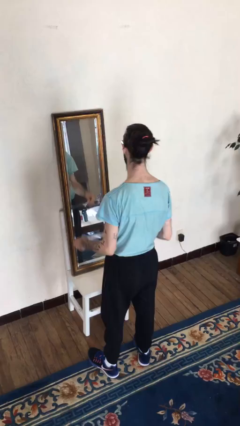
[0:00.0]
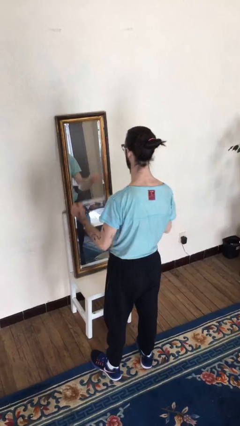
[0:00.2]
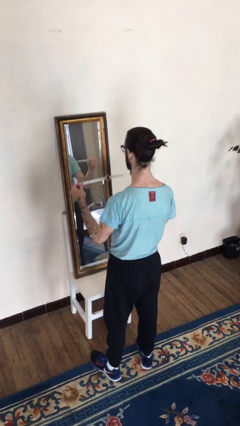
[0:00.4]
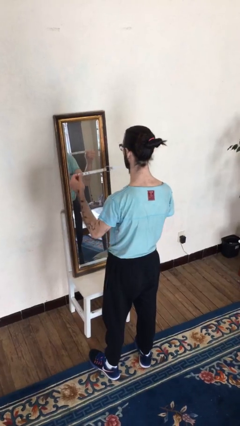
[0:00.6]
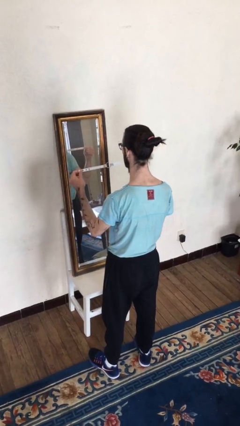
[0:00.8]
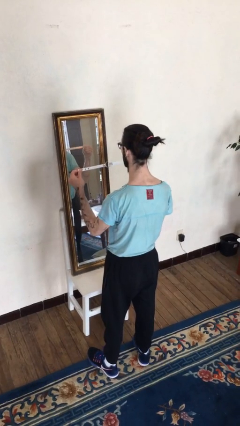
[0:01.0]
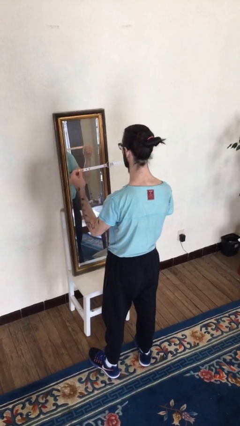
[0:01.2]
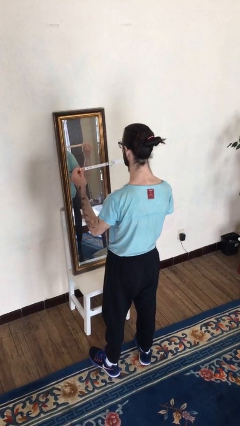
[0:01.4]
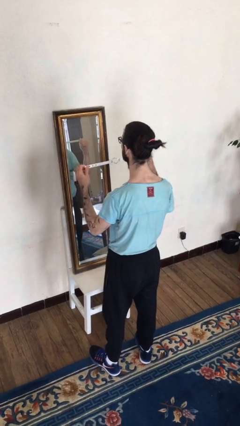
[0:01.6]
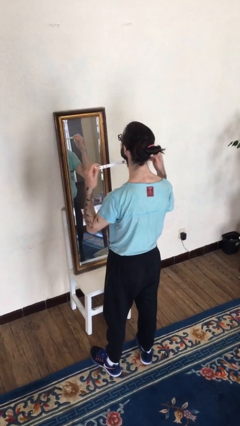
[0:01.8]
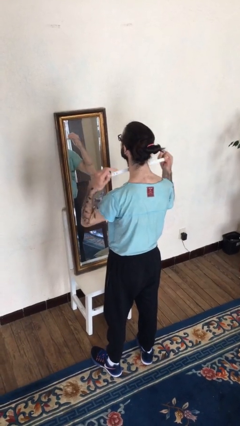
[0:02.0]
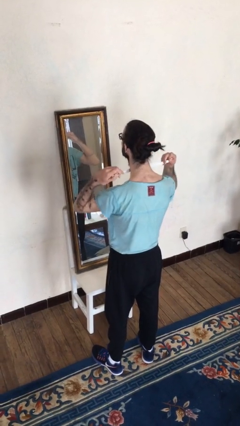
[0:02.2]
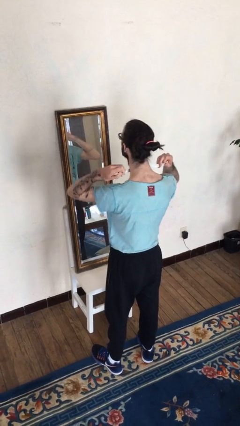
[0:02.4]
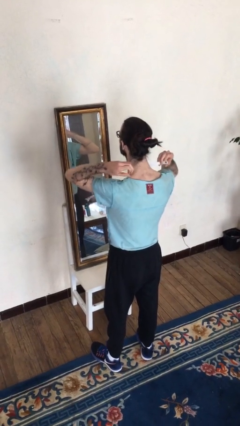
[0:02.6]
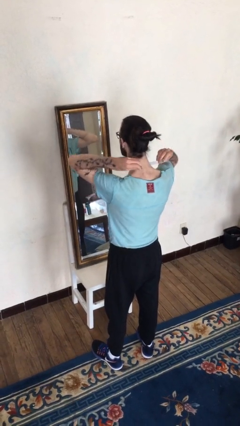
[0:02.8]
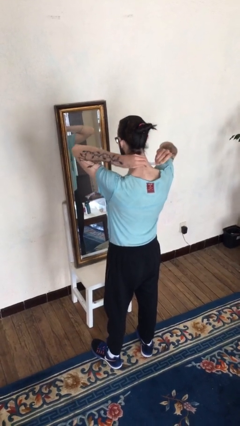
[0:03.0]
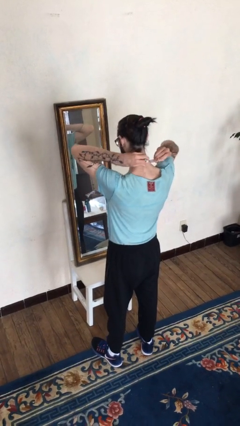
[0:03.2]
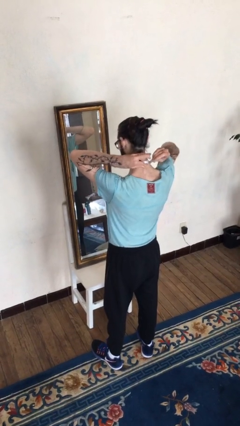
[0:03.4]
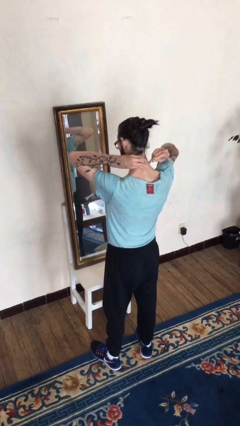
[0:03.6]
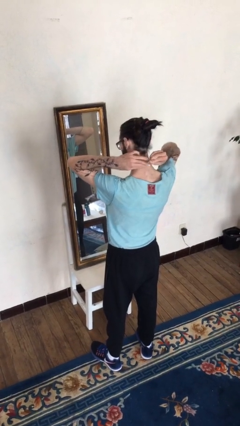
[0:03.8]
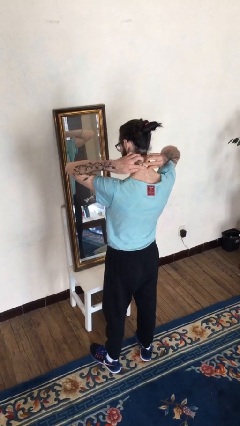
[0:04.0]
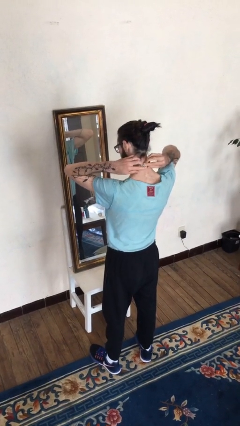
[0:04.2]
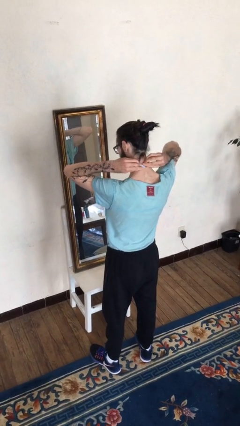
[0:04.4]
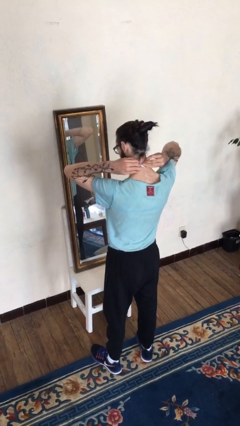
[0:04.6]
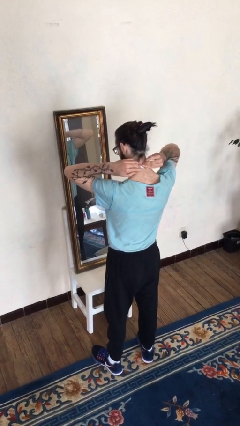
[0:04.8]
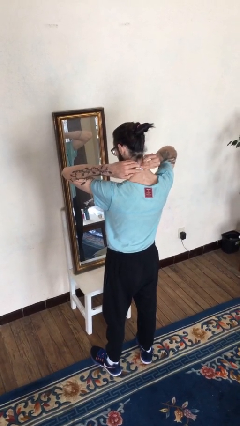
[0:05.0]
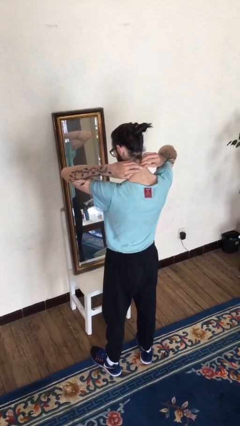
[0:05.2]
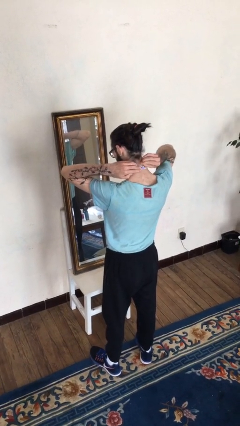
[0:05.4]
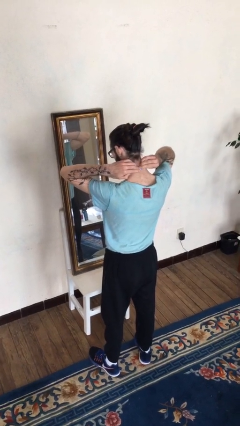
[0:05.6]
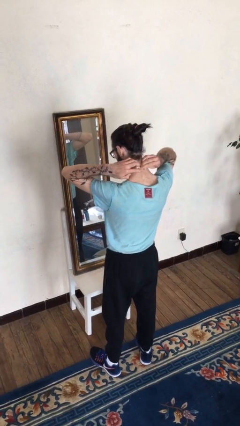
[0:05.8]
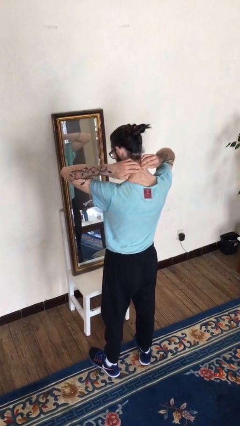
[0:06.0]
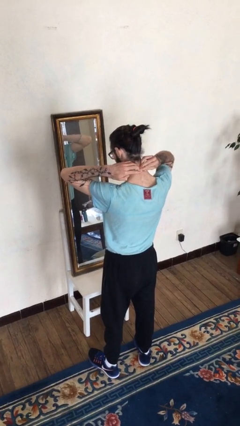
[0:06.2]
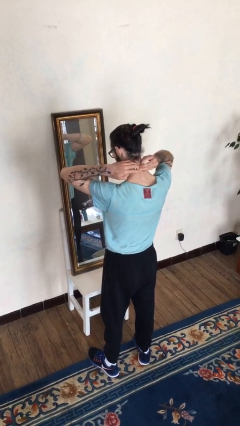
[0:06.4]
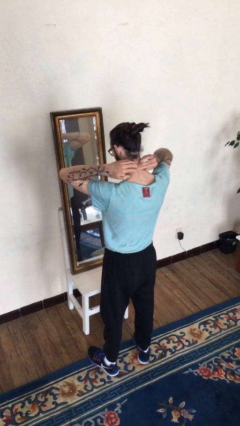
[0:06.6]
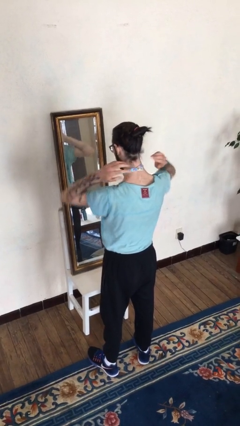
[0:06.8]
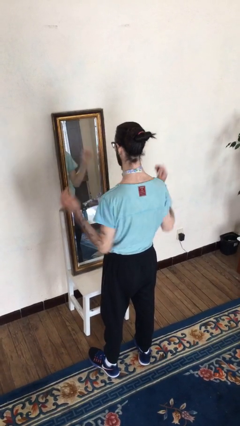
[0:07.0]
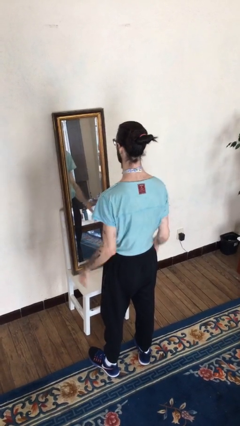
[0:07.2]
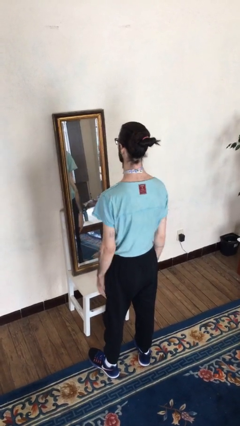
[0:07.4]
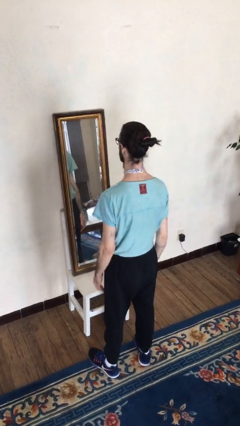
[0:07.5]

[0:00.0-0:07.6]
person puts on necklace

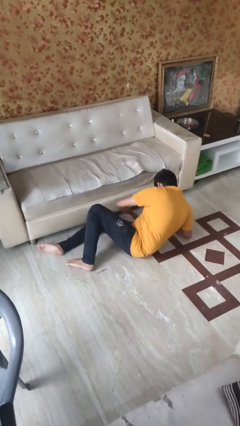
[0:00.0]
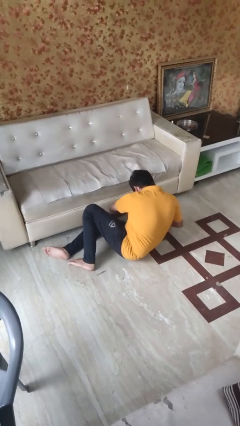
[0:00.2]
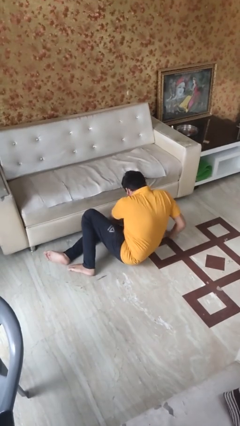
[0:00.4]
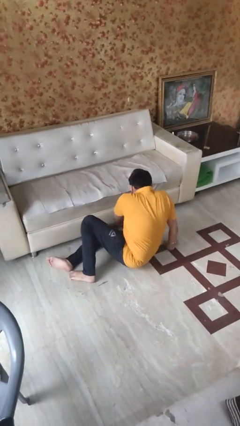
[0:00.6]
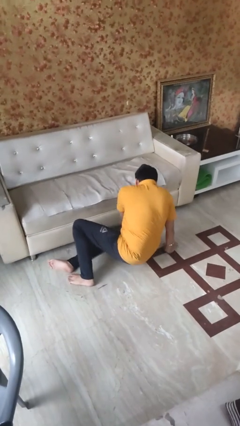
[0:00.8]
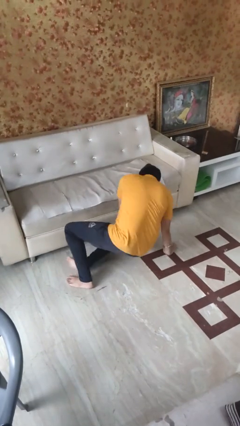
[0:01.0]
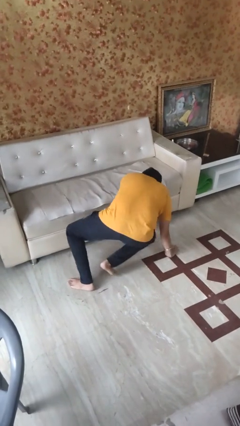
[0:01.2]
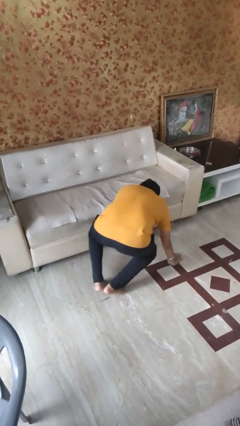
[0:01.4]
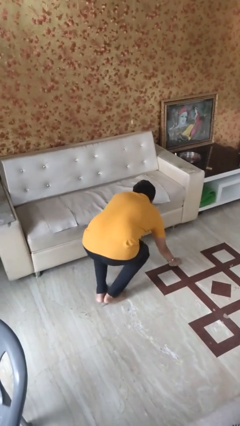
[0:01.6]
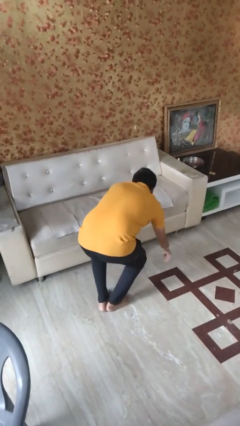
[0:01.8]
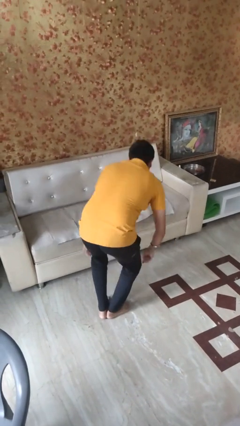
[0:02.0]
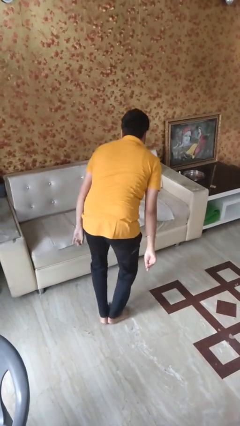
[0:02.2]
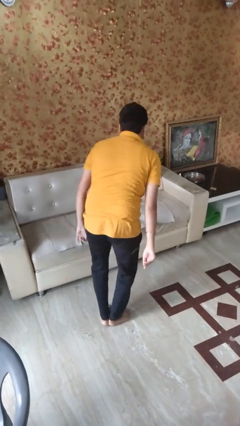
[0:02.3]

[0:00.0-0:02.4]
person stands up from floor

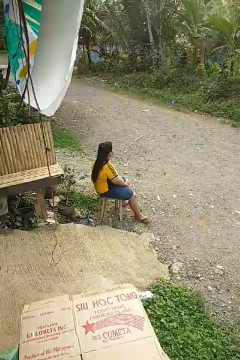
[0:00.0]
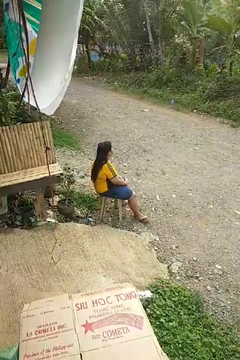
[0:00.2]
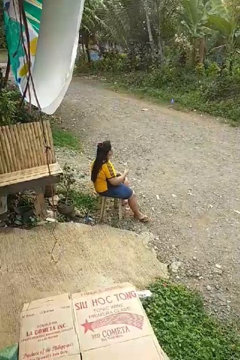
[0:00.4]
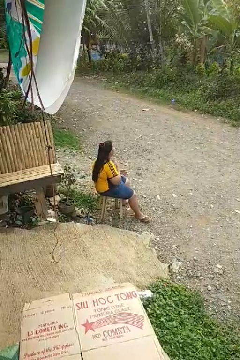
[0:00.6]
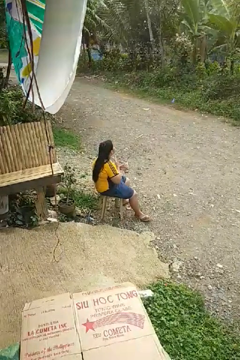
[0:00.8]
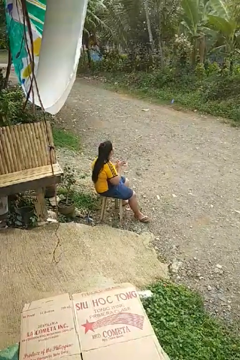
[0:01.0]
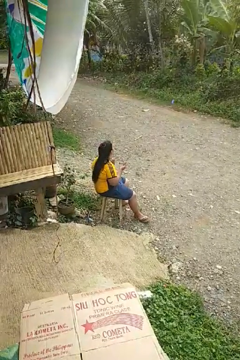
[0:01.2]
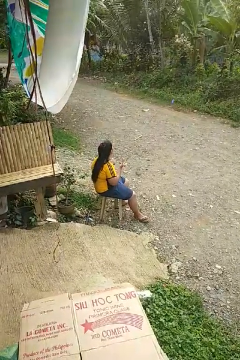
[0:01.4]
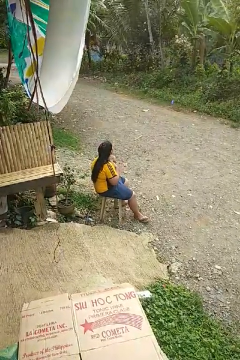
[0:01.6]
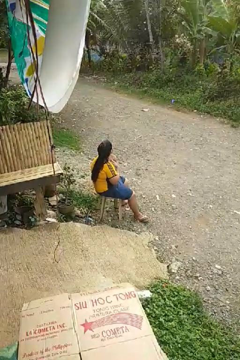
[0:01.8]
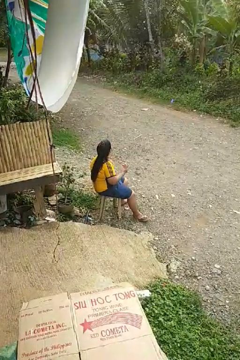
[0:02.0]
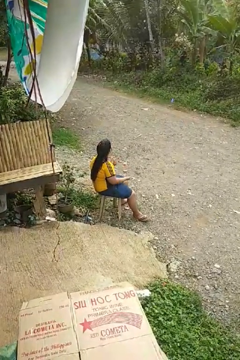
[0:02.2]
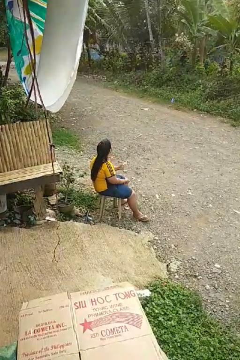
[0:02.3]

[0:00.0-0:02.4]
person drums on chest

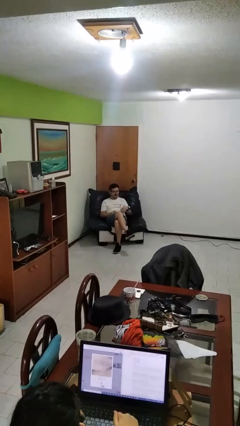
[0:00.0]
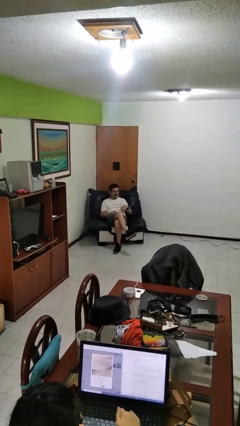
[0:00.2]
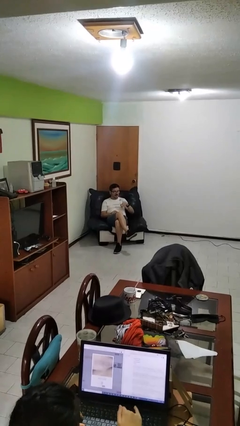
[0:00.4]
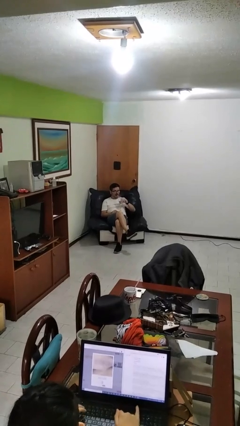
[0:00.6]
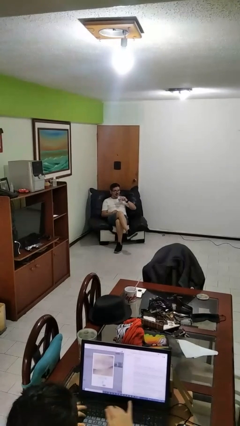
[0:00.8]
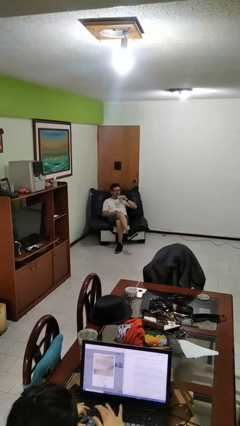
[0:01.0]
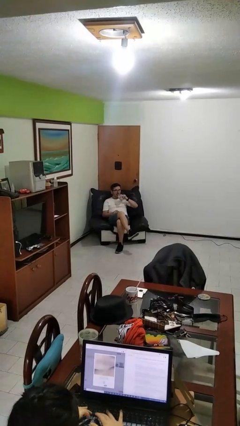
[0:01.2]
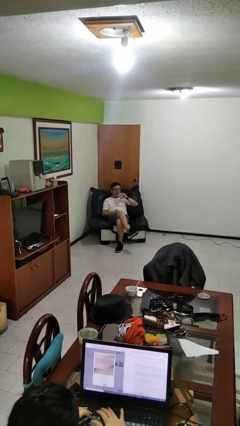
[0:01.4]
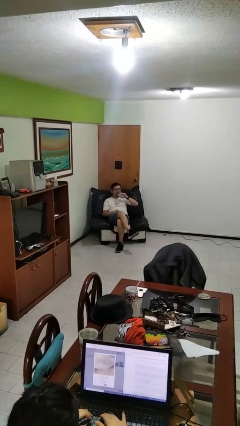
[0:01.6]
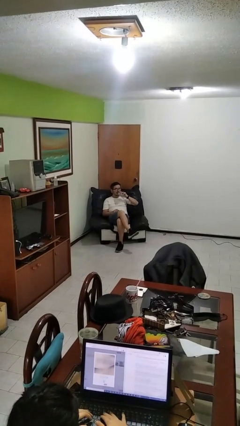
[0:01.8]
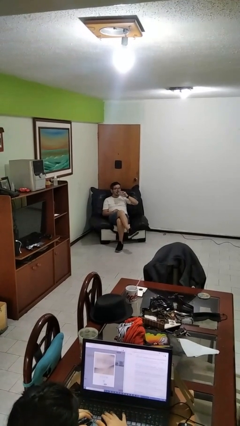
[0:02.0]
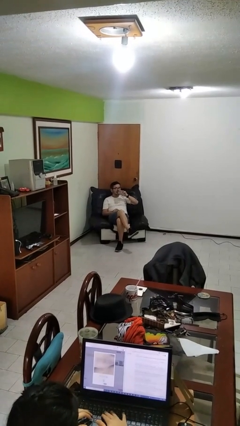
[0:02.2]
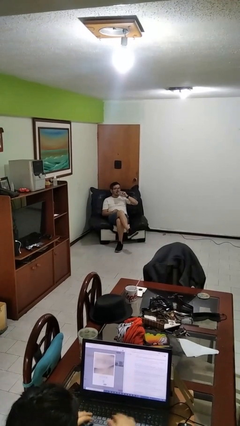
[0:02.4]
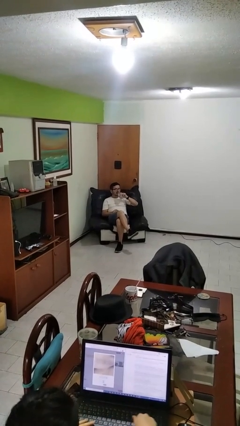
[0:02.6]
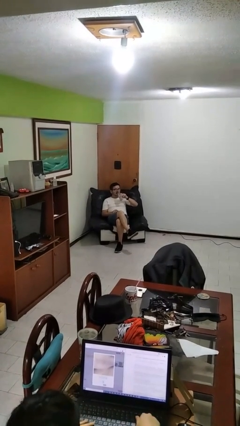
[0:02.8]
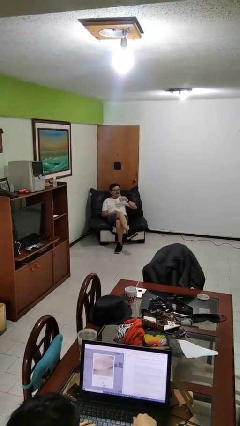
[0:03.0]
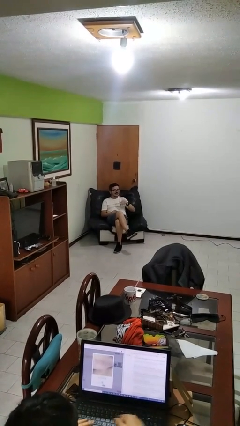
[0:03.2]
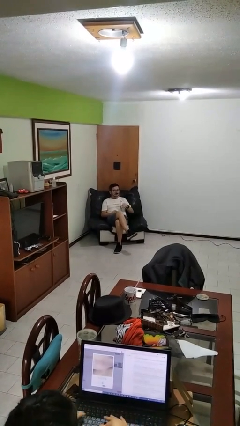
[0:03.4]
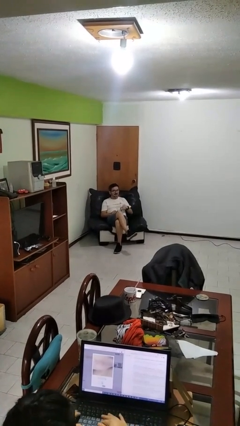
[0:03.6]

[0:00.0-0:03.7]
person drinks from bottle

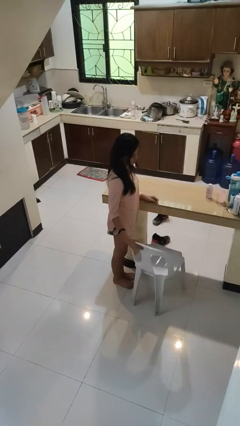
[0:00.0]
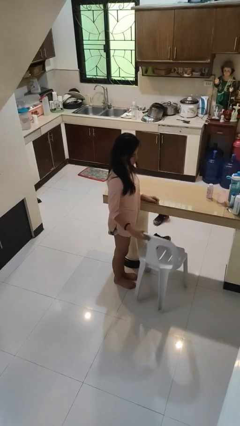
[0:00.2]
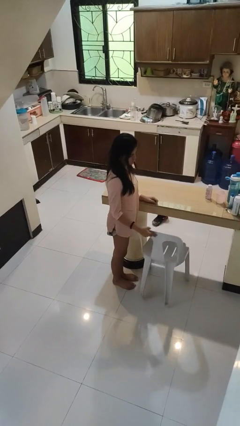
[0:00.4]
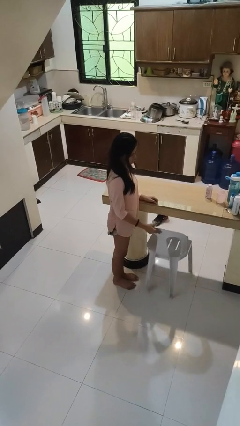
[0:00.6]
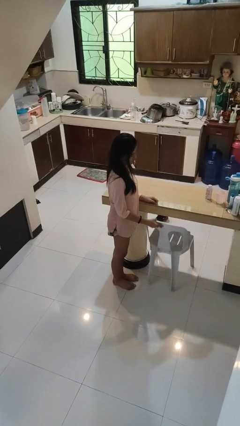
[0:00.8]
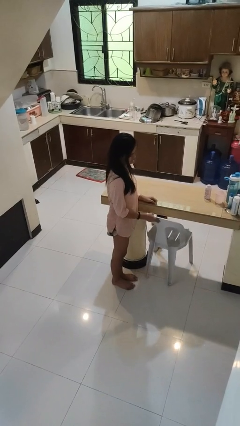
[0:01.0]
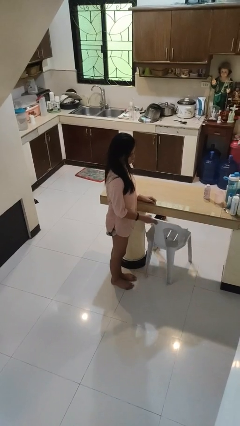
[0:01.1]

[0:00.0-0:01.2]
person pushes in chair

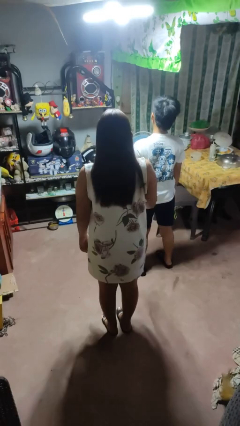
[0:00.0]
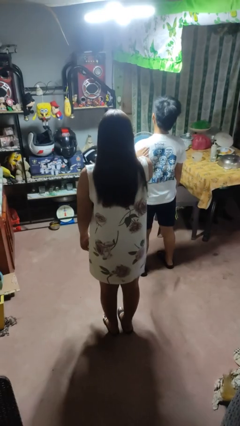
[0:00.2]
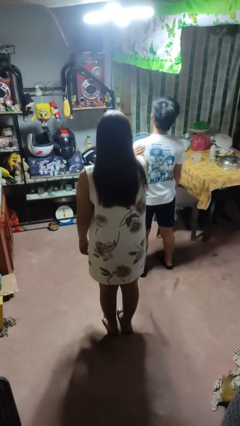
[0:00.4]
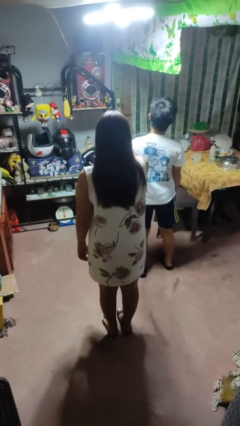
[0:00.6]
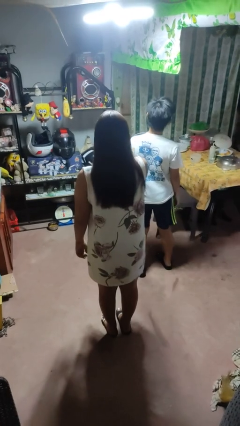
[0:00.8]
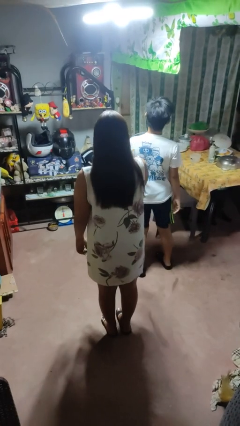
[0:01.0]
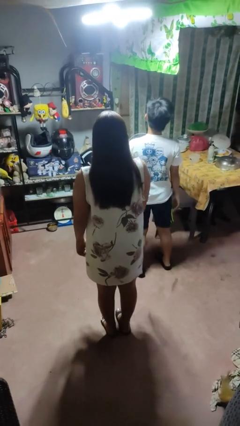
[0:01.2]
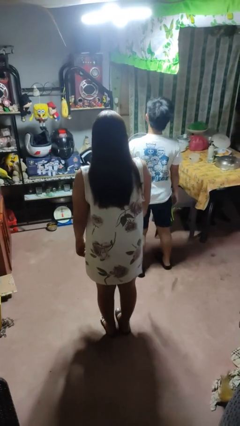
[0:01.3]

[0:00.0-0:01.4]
person shoves person
